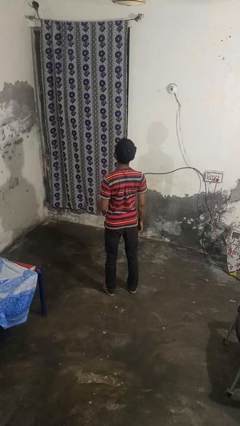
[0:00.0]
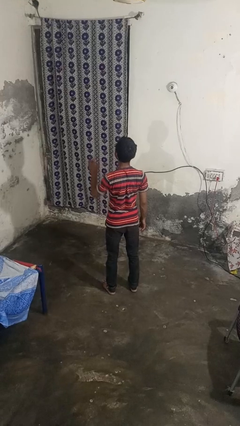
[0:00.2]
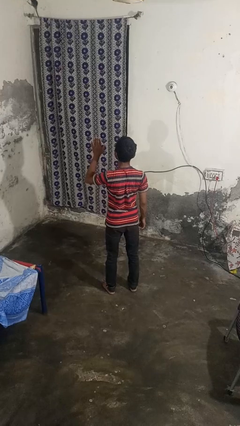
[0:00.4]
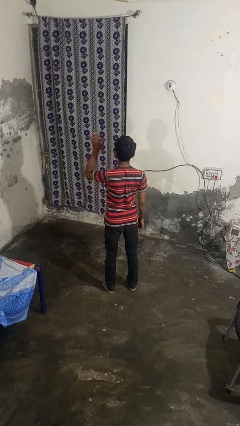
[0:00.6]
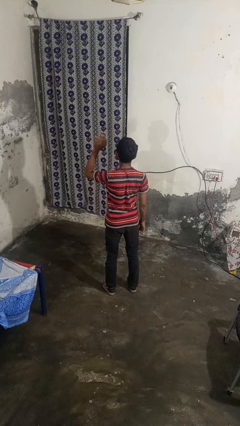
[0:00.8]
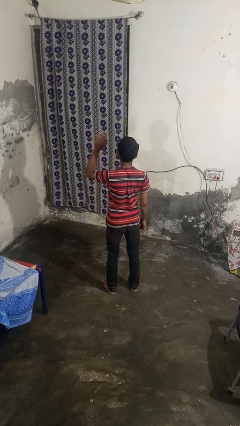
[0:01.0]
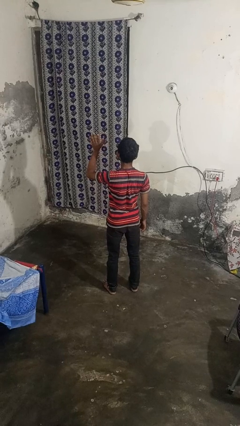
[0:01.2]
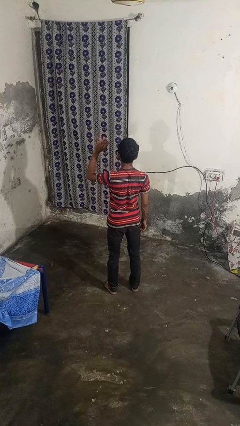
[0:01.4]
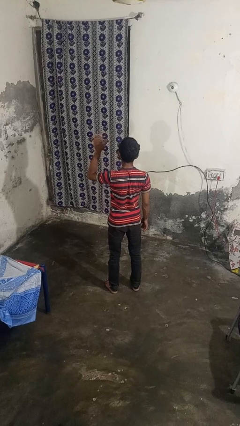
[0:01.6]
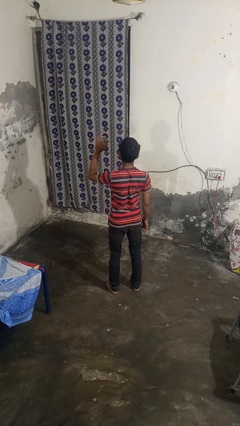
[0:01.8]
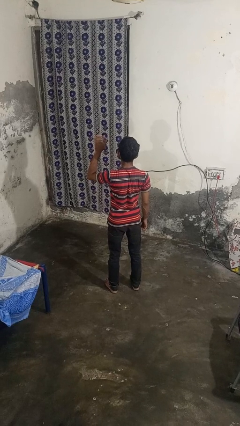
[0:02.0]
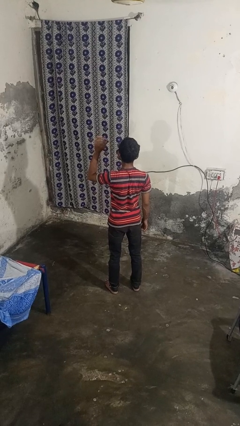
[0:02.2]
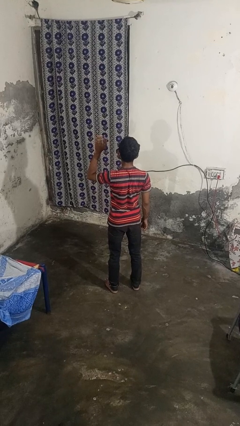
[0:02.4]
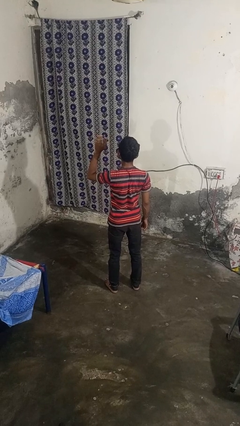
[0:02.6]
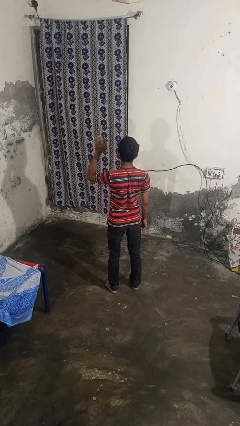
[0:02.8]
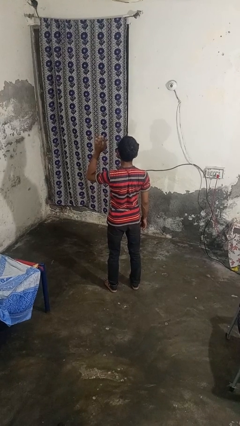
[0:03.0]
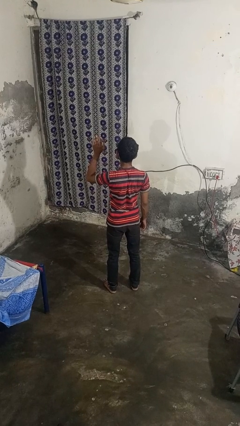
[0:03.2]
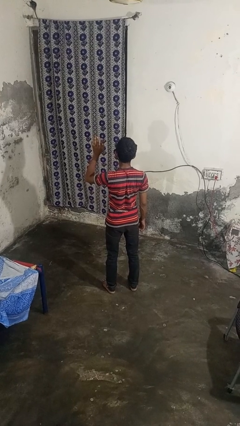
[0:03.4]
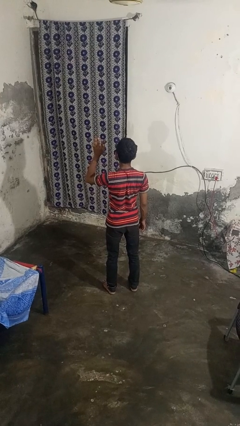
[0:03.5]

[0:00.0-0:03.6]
person waves at person

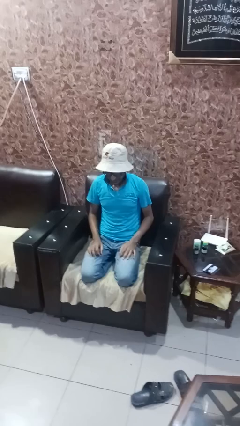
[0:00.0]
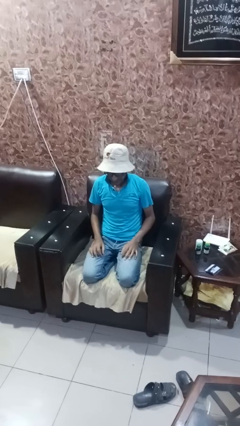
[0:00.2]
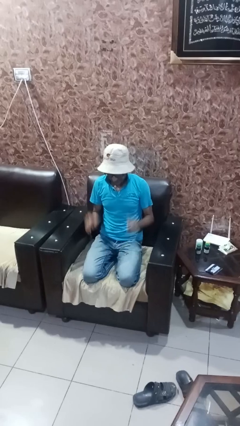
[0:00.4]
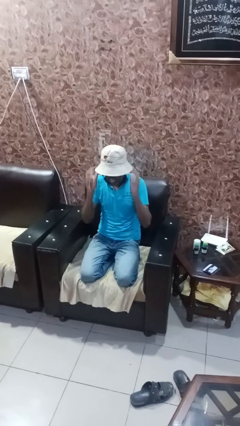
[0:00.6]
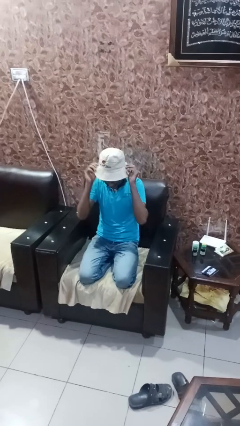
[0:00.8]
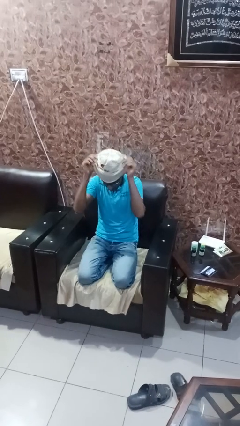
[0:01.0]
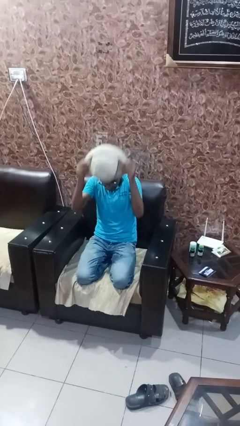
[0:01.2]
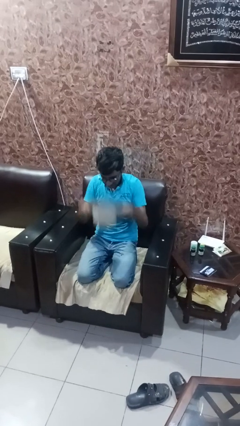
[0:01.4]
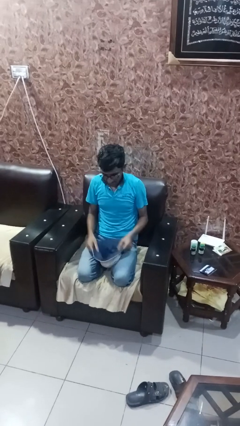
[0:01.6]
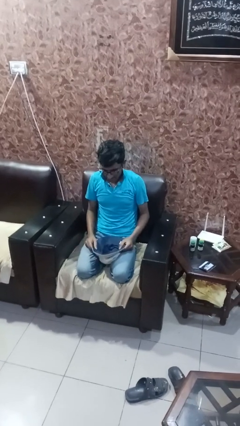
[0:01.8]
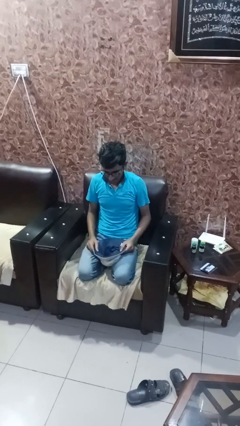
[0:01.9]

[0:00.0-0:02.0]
person takes off hat

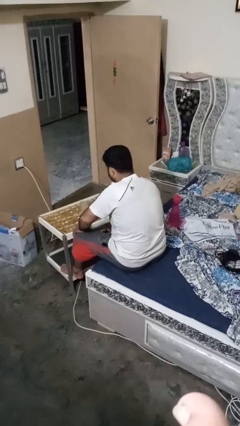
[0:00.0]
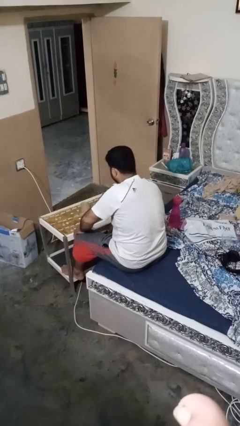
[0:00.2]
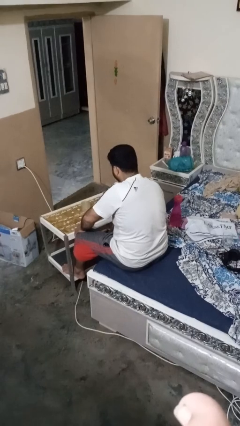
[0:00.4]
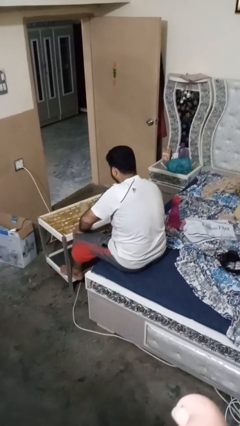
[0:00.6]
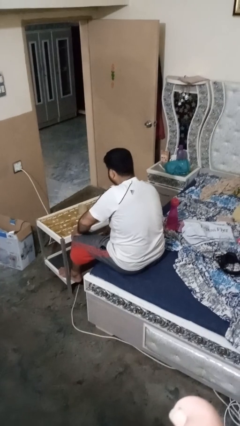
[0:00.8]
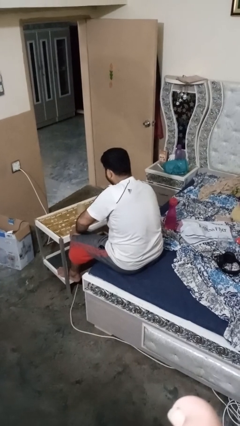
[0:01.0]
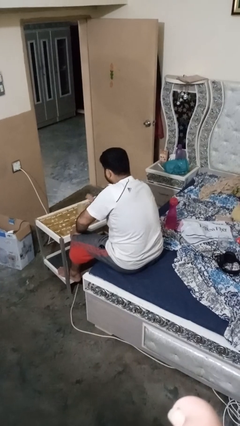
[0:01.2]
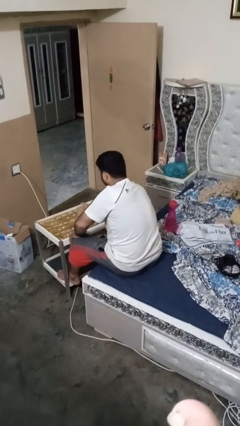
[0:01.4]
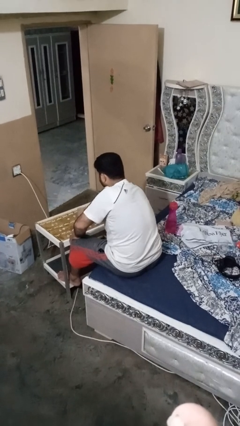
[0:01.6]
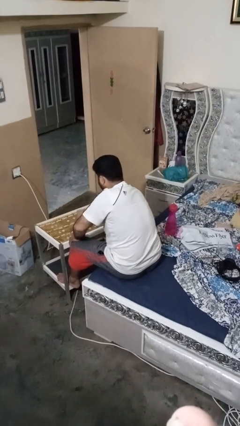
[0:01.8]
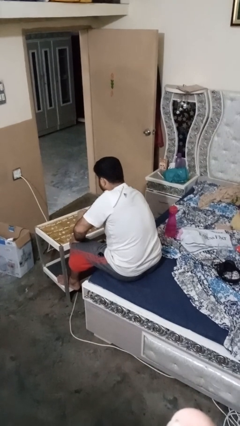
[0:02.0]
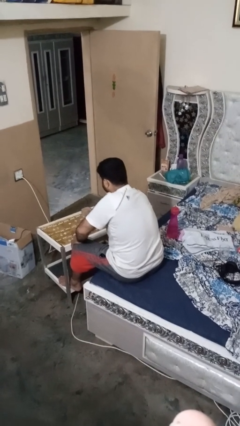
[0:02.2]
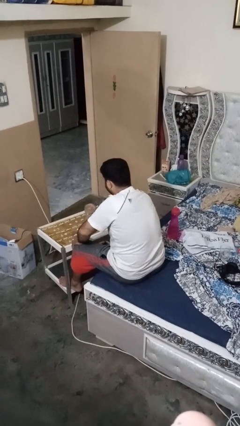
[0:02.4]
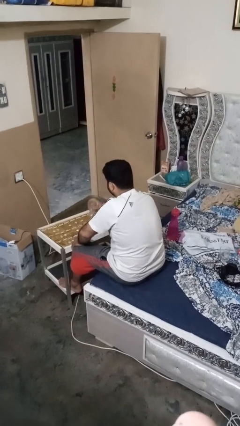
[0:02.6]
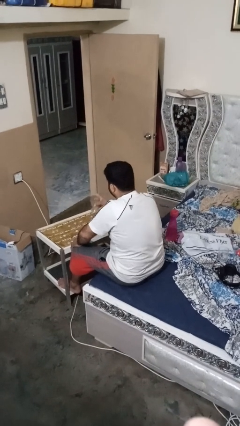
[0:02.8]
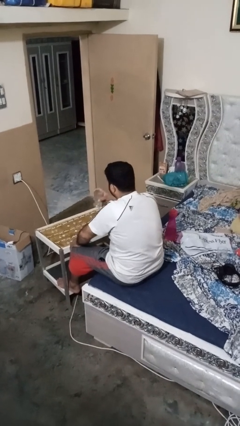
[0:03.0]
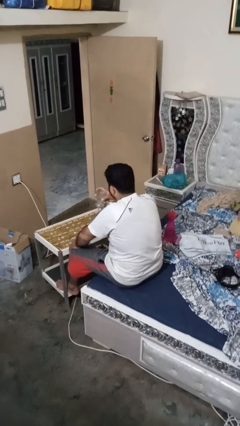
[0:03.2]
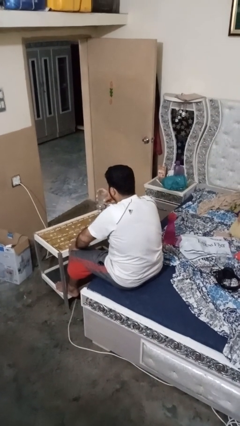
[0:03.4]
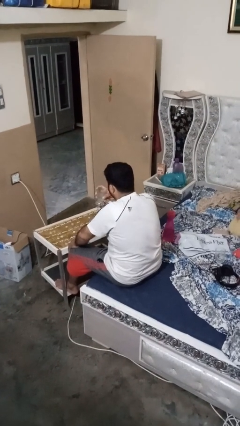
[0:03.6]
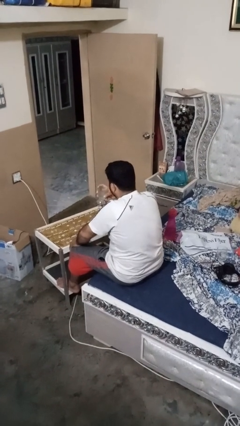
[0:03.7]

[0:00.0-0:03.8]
person picks up object from table

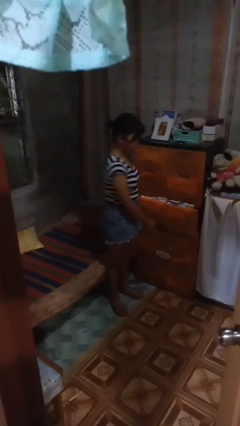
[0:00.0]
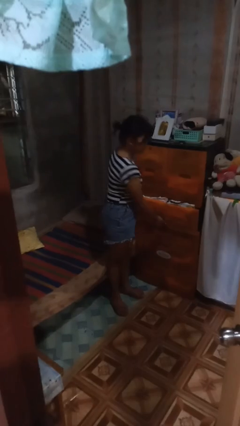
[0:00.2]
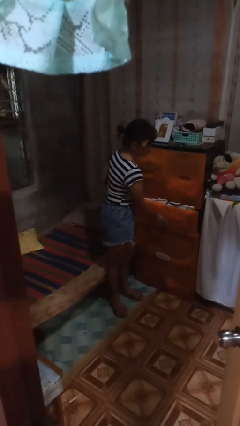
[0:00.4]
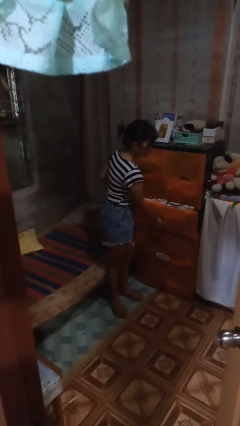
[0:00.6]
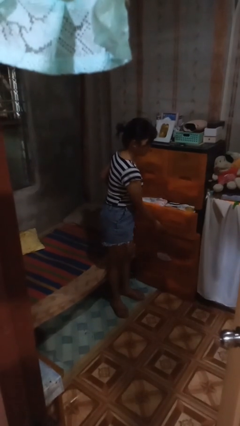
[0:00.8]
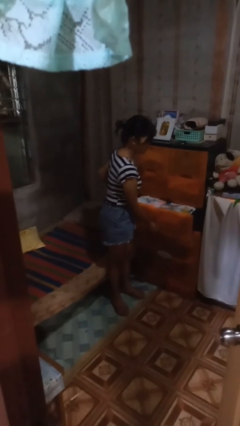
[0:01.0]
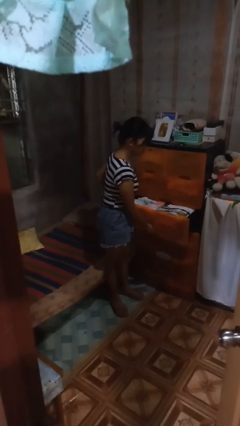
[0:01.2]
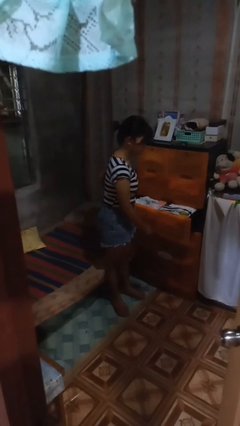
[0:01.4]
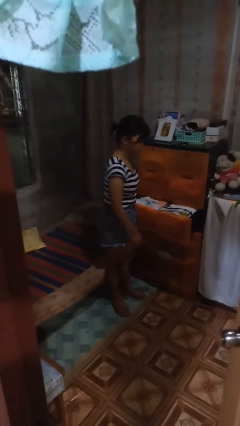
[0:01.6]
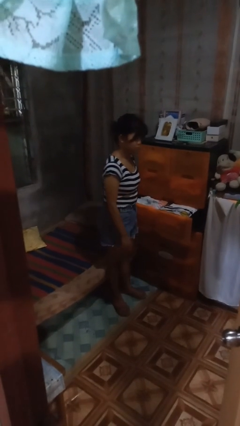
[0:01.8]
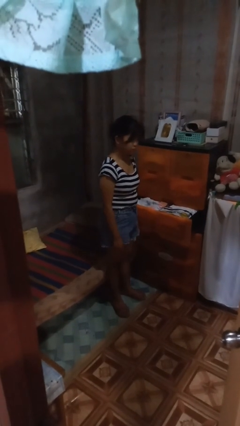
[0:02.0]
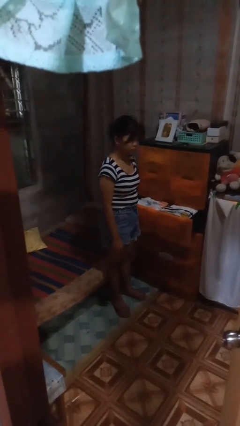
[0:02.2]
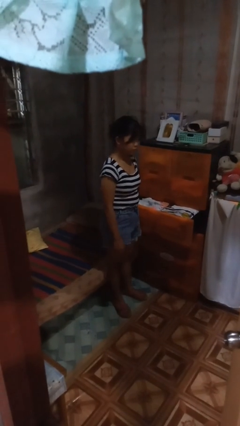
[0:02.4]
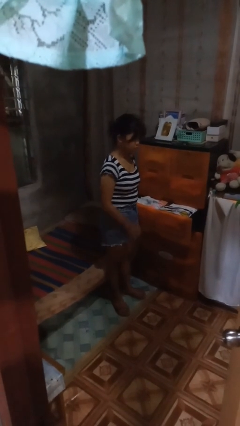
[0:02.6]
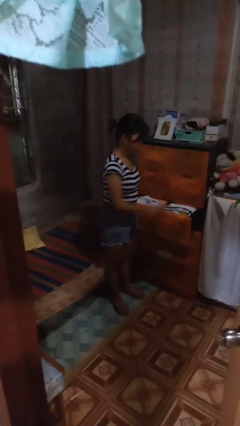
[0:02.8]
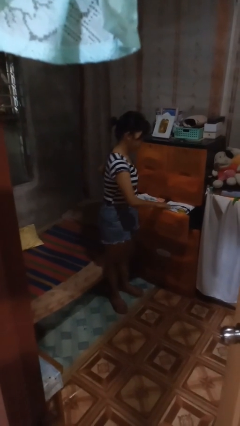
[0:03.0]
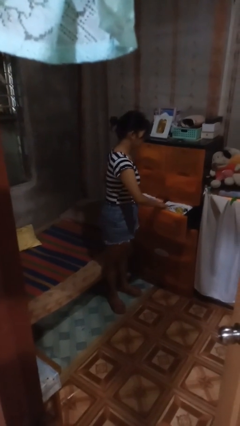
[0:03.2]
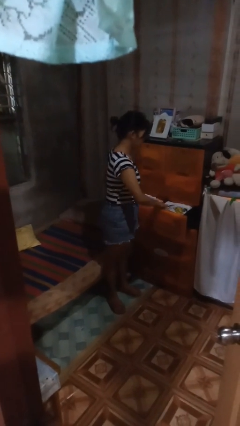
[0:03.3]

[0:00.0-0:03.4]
person opens dresser drawer

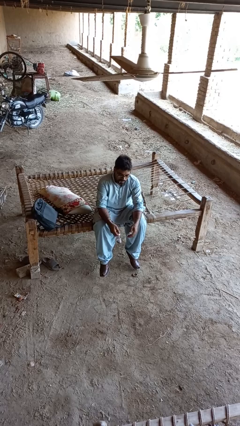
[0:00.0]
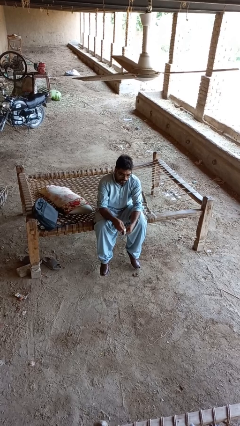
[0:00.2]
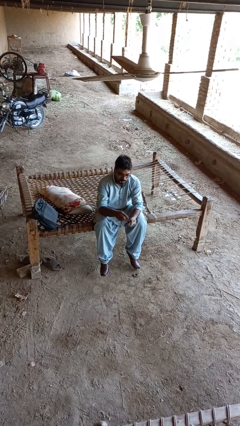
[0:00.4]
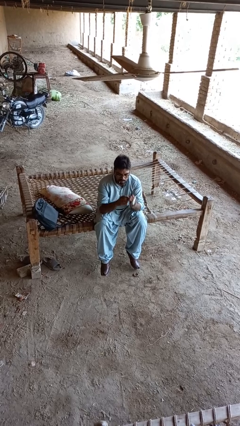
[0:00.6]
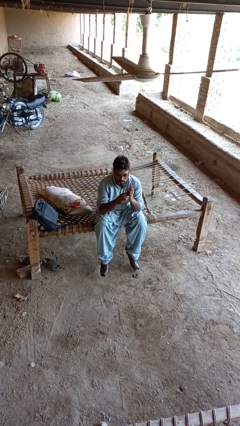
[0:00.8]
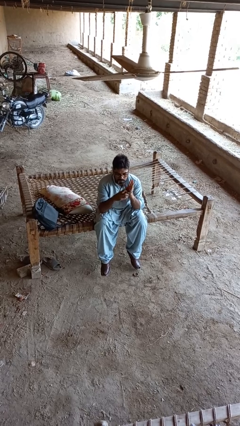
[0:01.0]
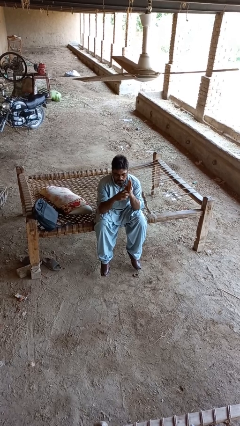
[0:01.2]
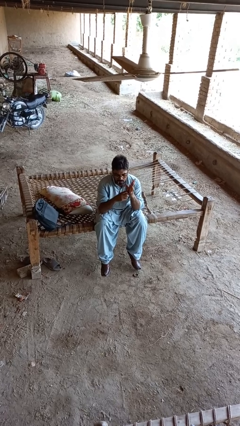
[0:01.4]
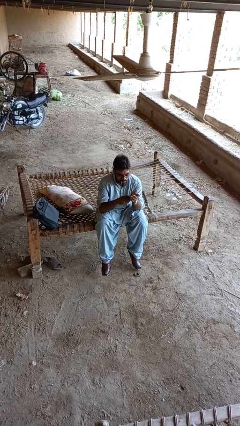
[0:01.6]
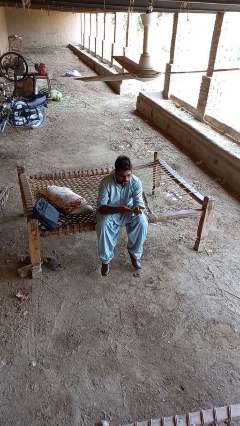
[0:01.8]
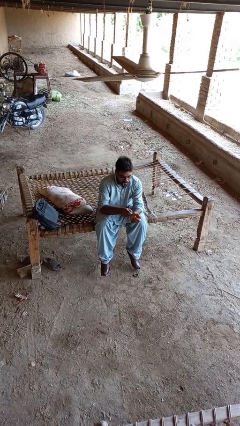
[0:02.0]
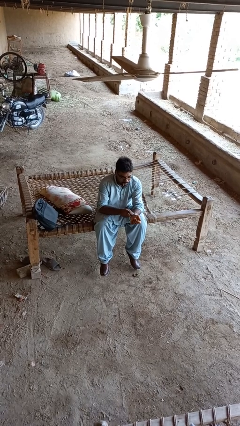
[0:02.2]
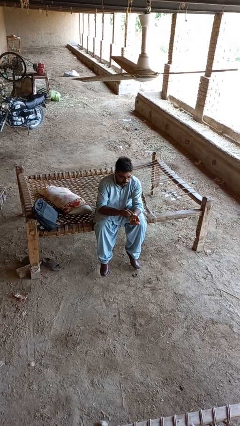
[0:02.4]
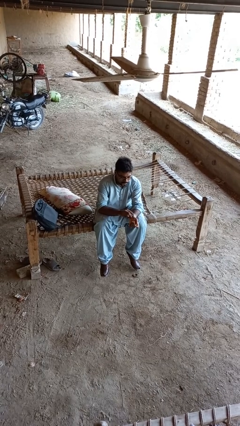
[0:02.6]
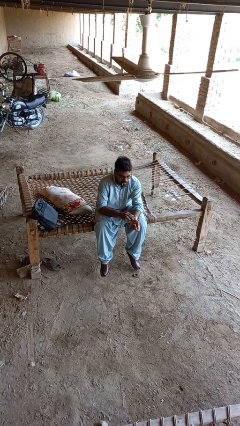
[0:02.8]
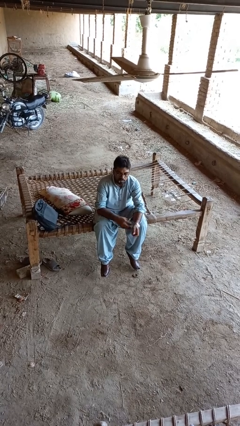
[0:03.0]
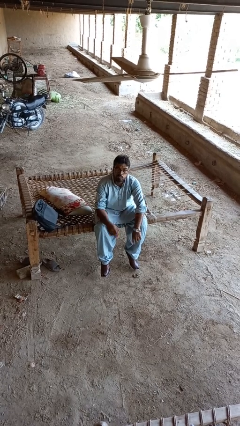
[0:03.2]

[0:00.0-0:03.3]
person puts on wristwatch

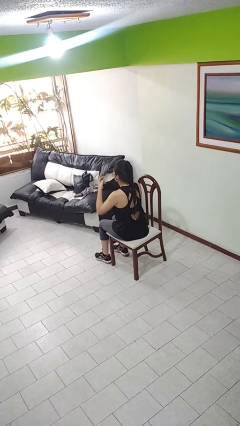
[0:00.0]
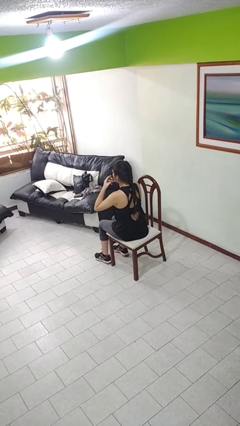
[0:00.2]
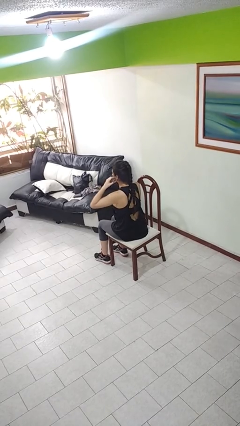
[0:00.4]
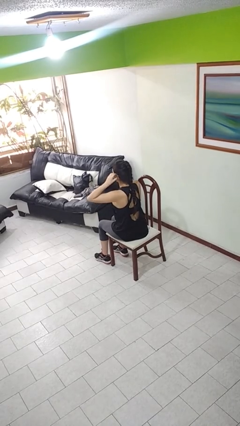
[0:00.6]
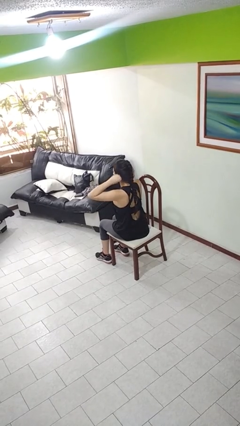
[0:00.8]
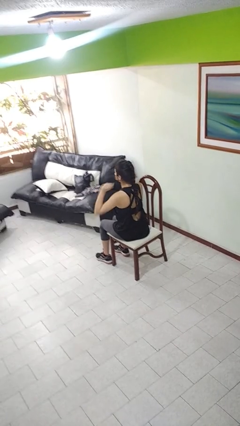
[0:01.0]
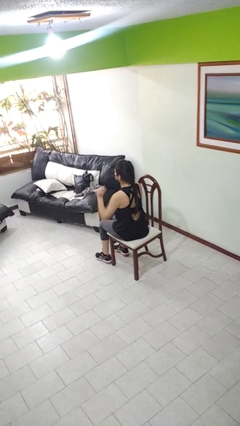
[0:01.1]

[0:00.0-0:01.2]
person puts on facemask
